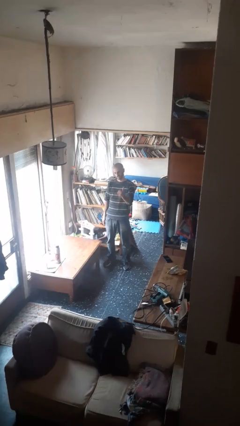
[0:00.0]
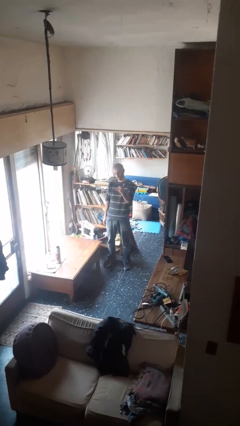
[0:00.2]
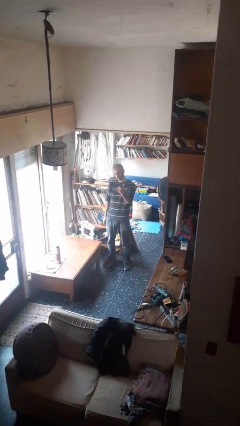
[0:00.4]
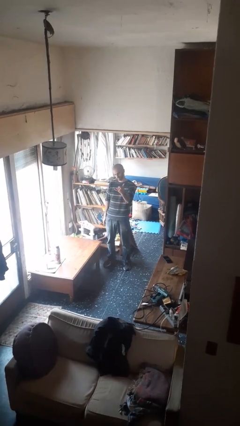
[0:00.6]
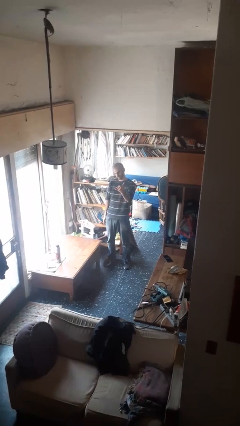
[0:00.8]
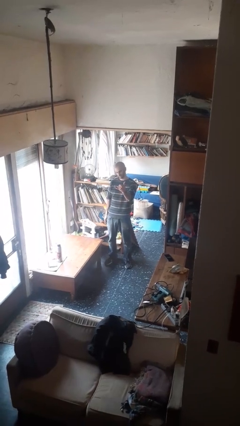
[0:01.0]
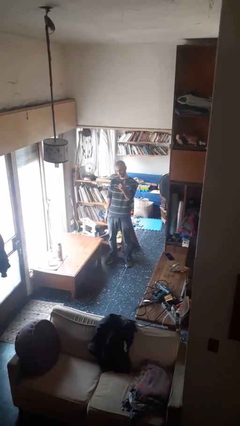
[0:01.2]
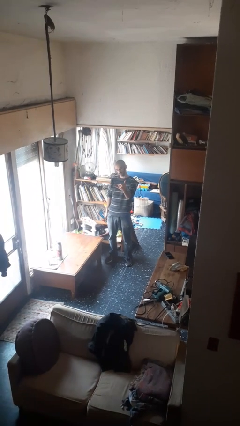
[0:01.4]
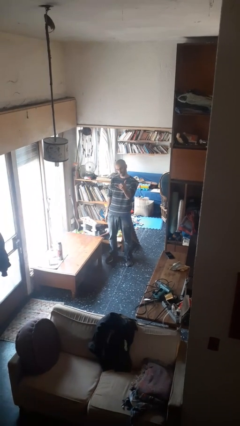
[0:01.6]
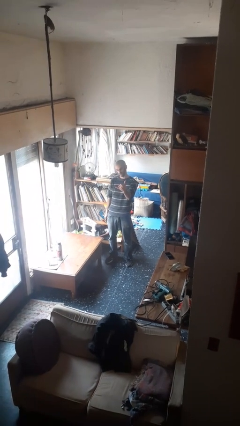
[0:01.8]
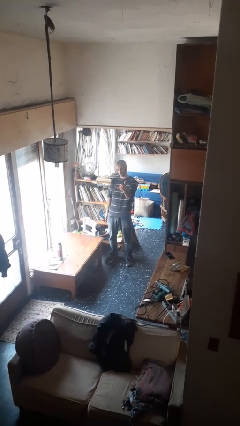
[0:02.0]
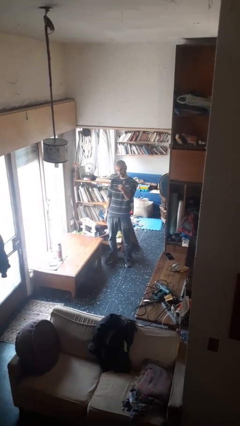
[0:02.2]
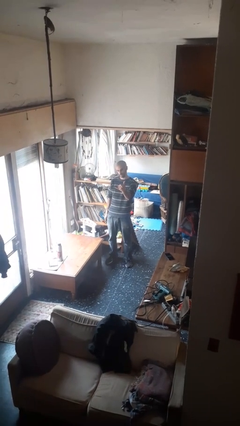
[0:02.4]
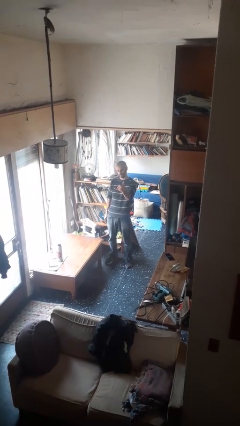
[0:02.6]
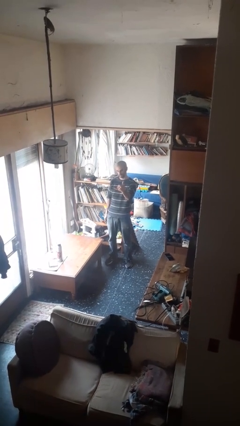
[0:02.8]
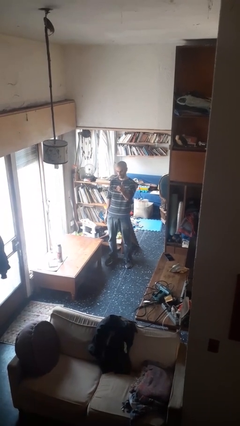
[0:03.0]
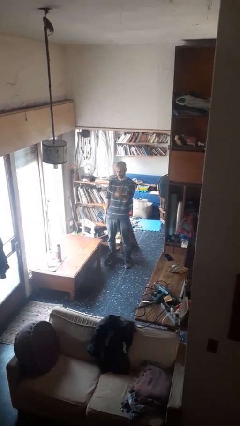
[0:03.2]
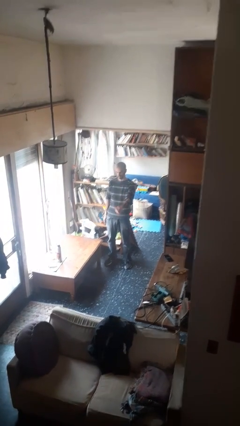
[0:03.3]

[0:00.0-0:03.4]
person gestures hang loose

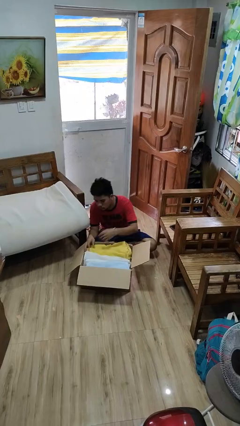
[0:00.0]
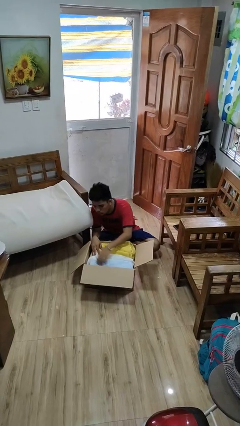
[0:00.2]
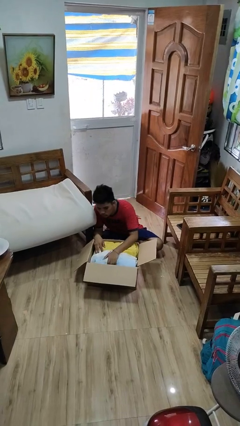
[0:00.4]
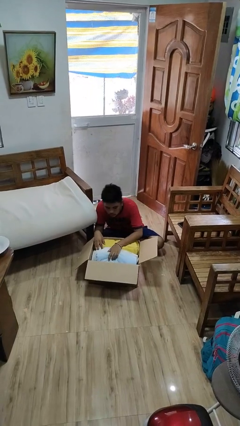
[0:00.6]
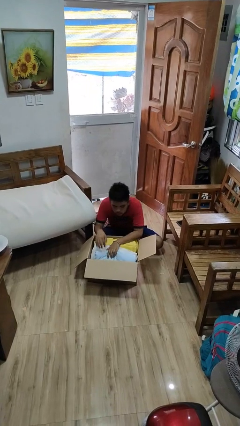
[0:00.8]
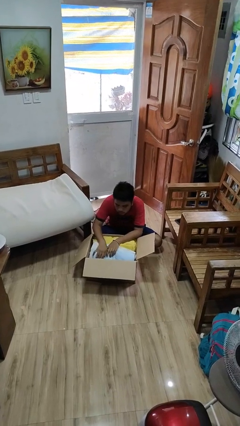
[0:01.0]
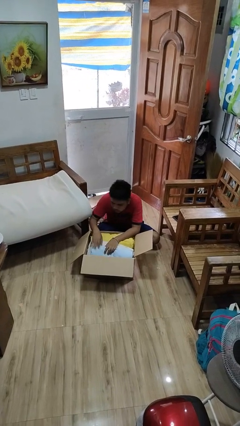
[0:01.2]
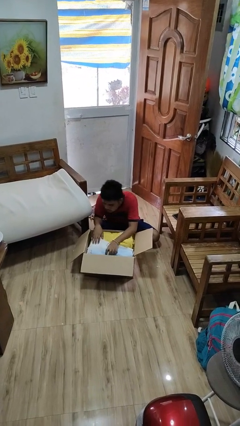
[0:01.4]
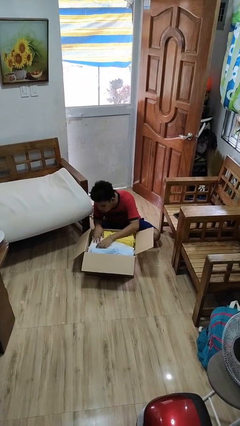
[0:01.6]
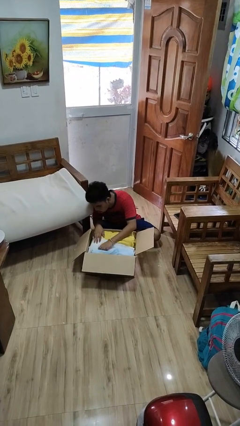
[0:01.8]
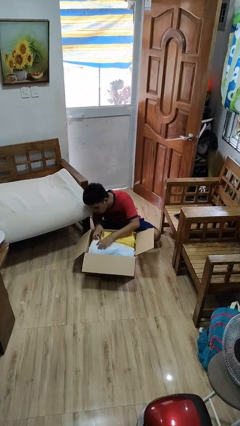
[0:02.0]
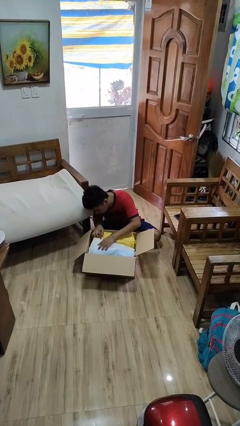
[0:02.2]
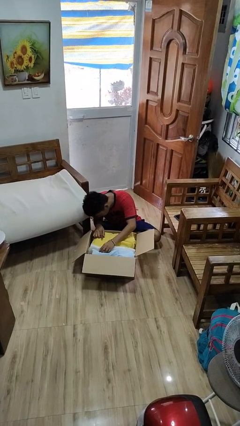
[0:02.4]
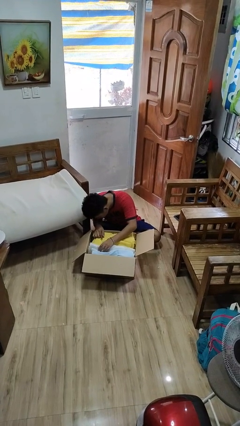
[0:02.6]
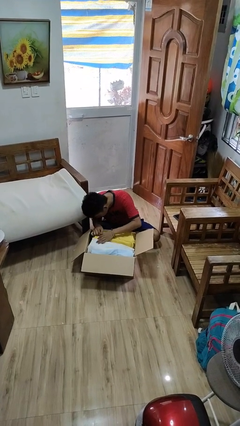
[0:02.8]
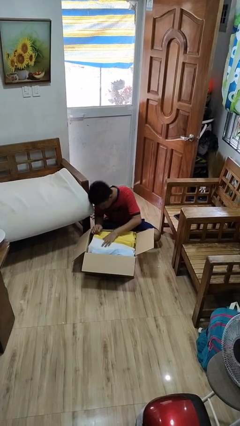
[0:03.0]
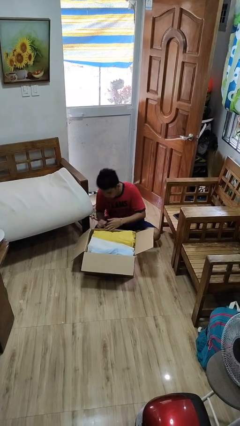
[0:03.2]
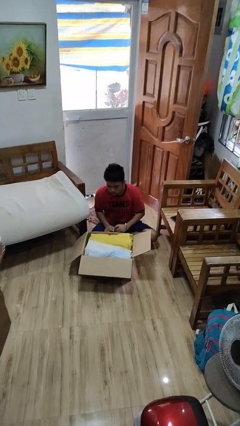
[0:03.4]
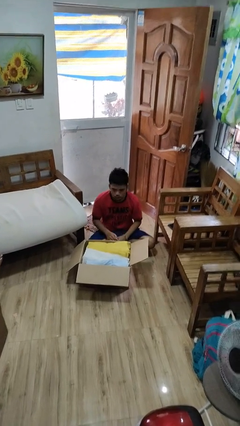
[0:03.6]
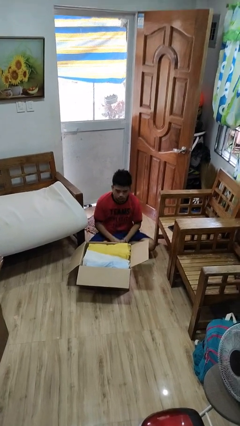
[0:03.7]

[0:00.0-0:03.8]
person searches in box

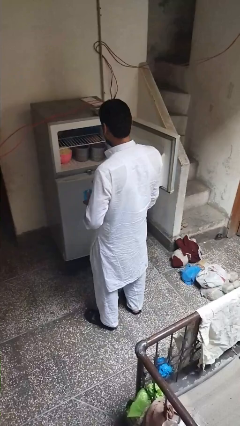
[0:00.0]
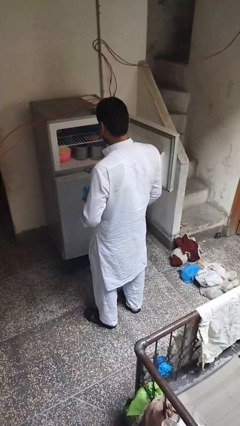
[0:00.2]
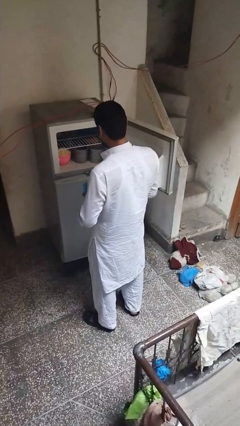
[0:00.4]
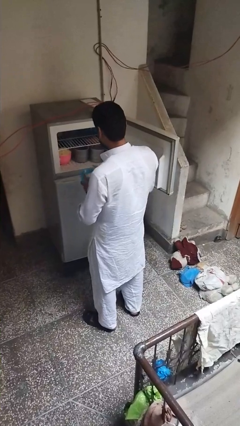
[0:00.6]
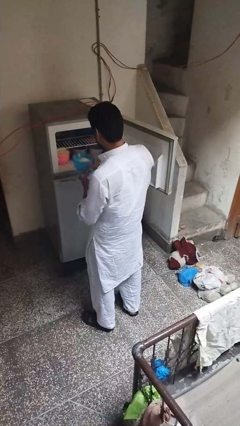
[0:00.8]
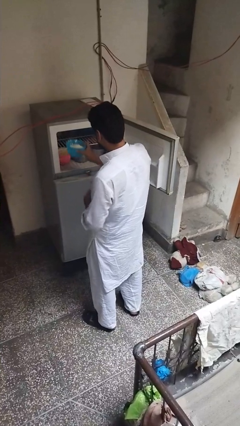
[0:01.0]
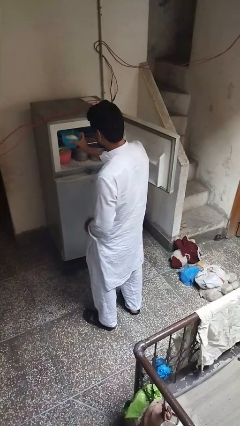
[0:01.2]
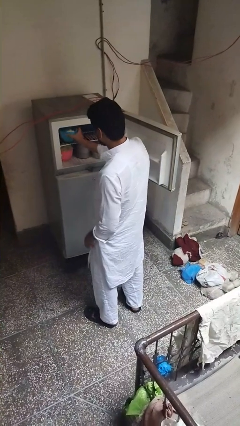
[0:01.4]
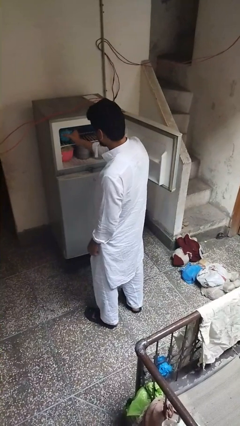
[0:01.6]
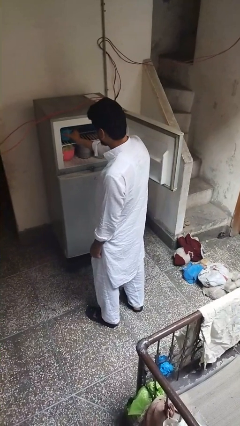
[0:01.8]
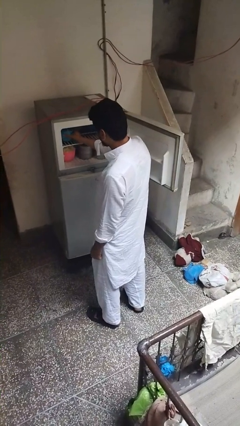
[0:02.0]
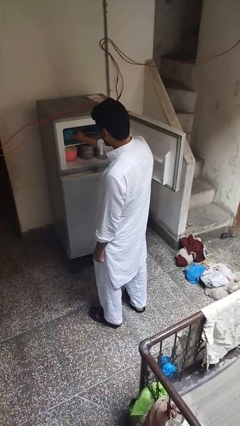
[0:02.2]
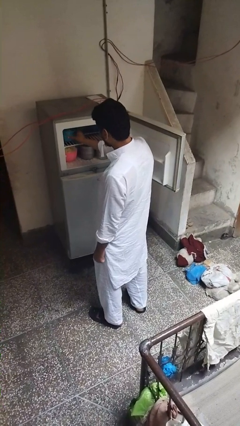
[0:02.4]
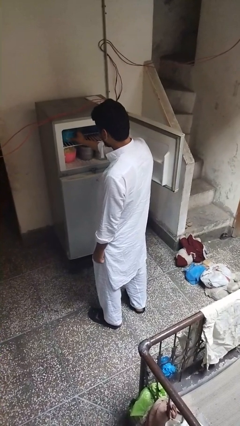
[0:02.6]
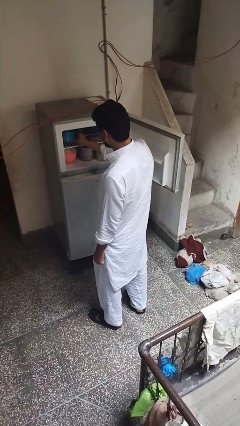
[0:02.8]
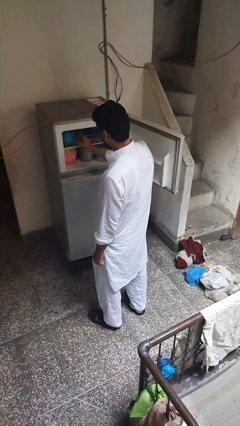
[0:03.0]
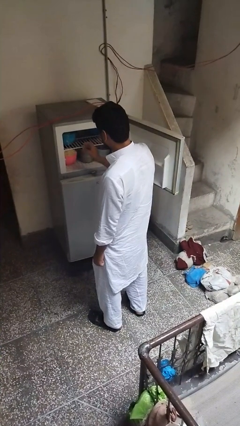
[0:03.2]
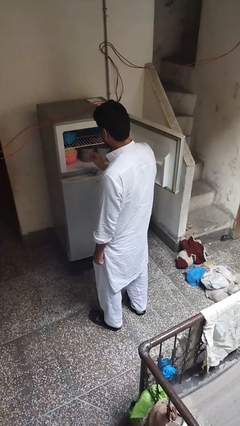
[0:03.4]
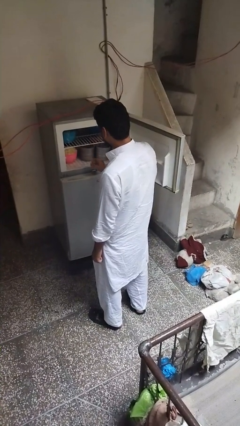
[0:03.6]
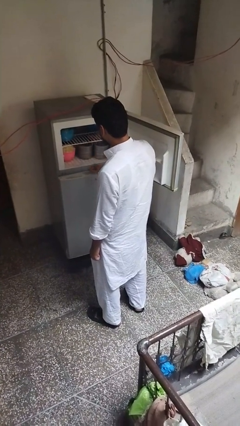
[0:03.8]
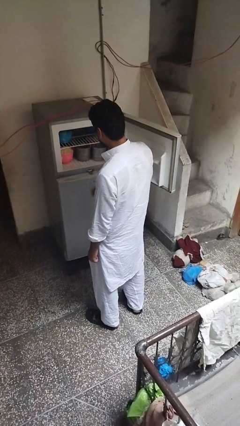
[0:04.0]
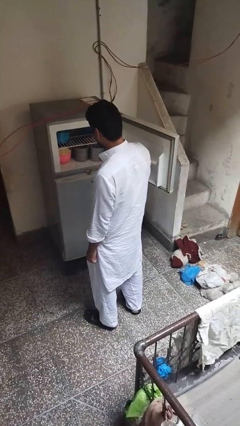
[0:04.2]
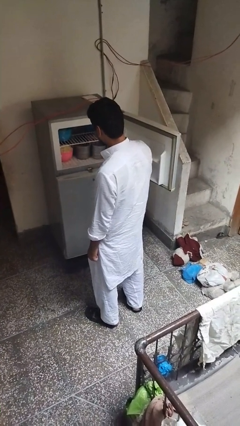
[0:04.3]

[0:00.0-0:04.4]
person puts object into refrigerator

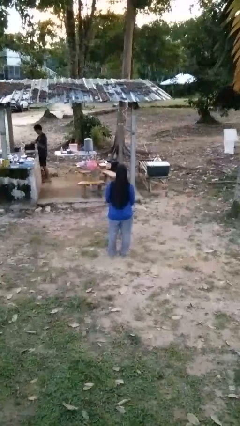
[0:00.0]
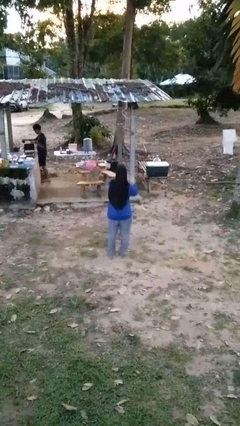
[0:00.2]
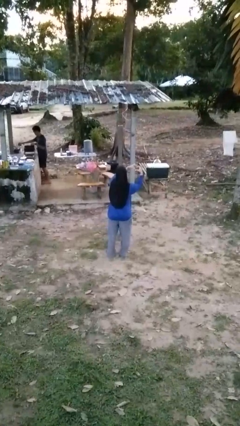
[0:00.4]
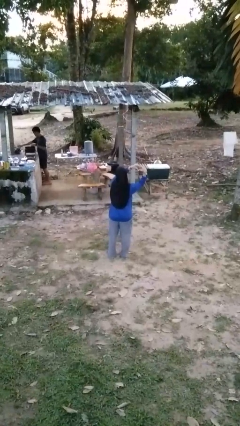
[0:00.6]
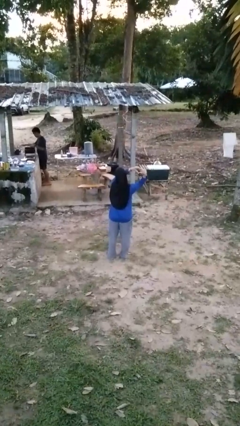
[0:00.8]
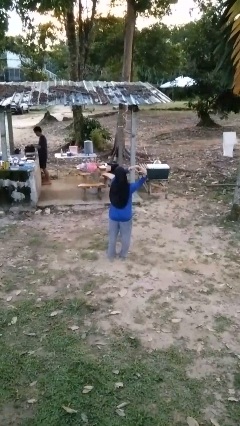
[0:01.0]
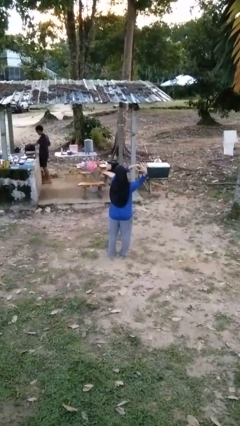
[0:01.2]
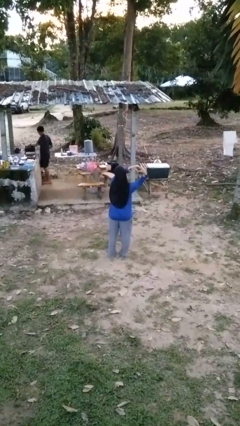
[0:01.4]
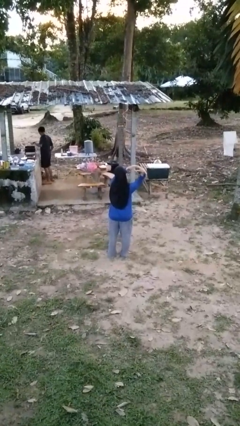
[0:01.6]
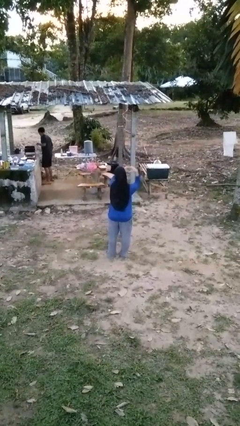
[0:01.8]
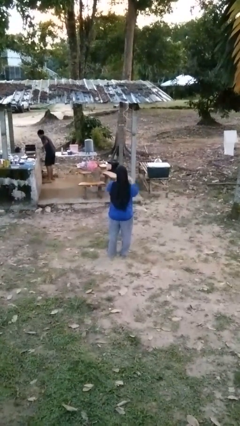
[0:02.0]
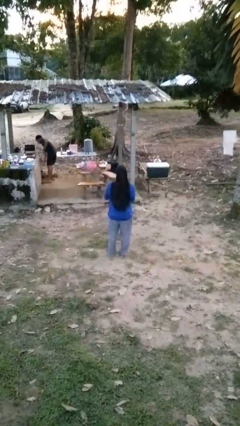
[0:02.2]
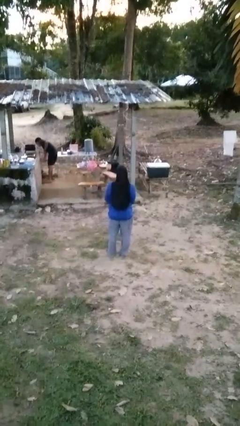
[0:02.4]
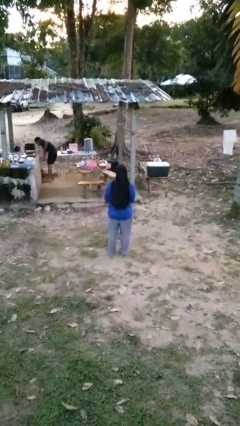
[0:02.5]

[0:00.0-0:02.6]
person gestures heart

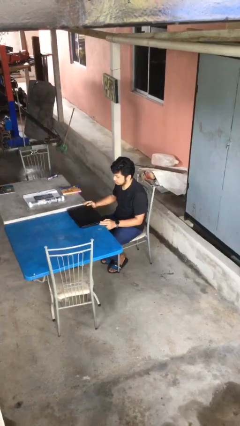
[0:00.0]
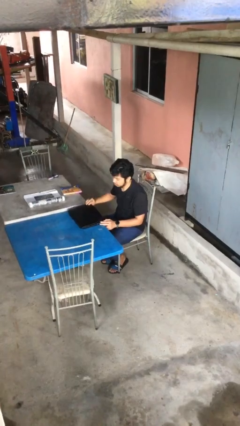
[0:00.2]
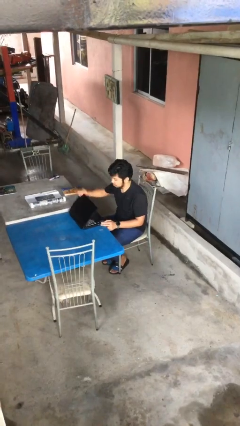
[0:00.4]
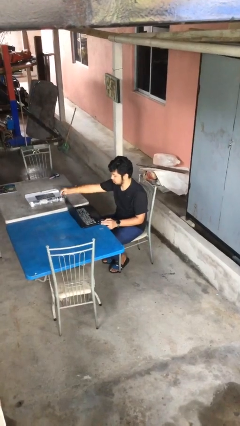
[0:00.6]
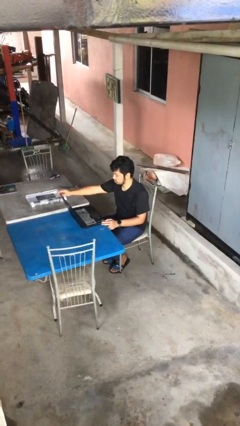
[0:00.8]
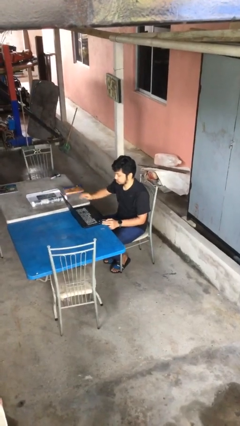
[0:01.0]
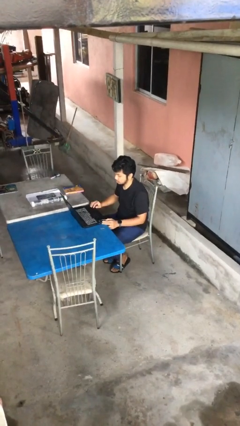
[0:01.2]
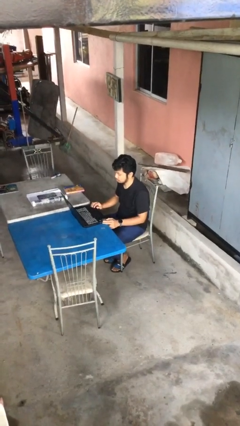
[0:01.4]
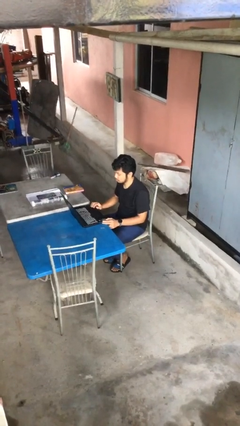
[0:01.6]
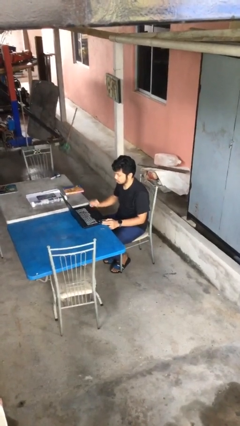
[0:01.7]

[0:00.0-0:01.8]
person opens laptop

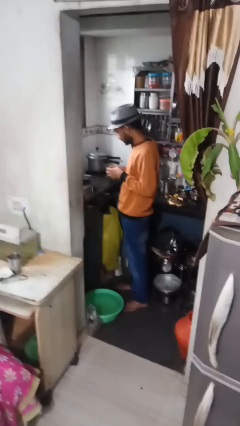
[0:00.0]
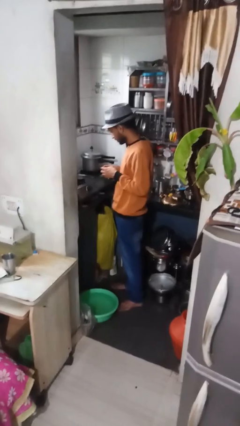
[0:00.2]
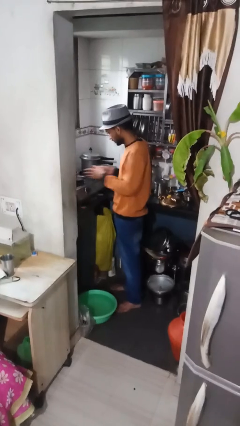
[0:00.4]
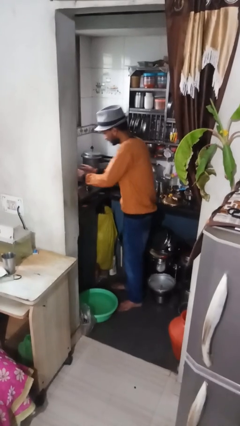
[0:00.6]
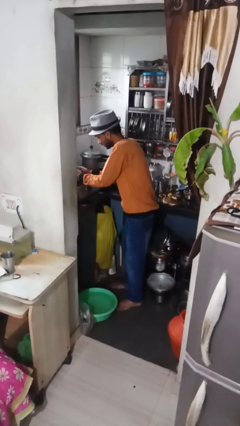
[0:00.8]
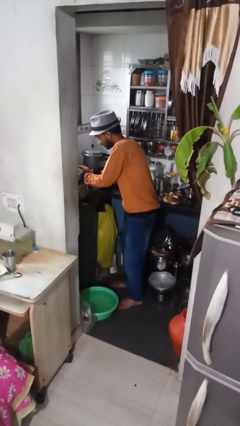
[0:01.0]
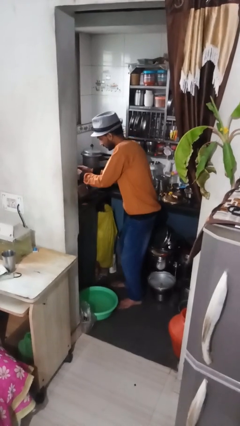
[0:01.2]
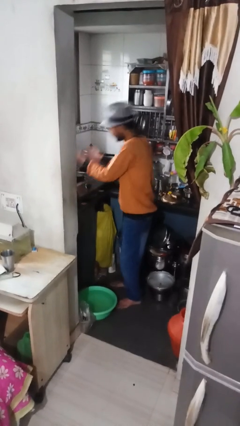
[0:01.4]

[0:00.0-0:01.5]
person burns hand
